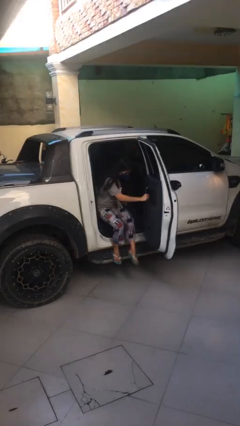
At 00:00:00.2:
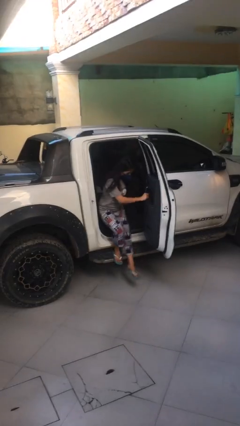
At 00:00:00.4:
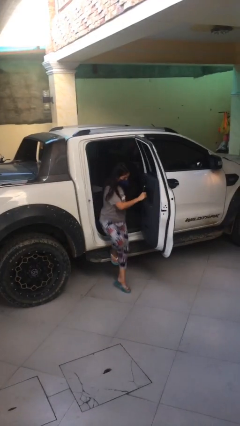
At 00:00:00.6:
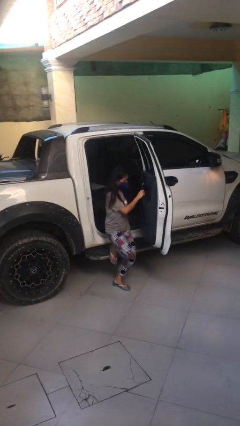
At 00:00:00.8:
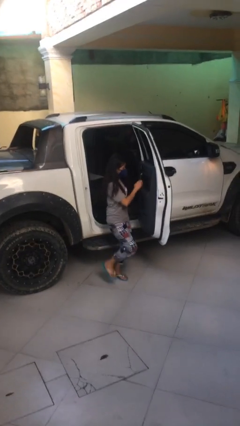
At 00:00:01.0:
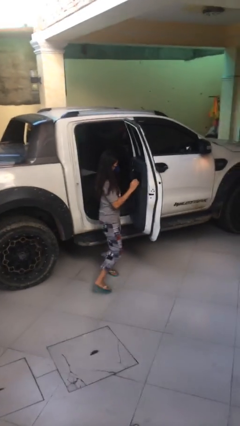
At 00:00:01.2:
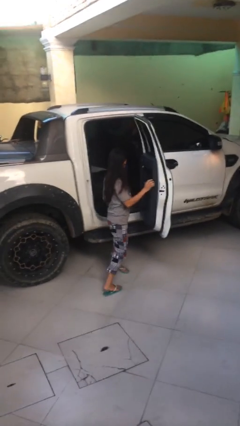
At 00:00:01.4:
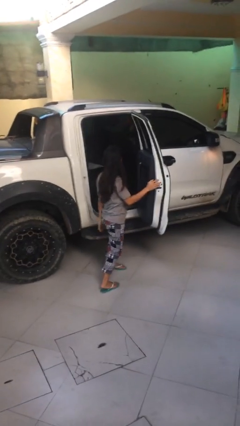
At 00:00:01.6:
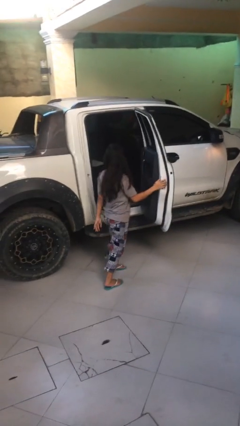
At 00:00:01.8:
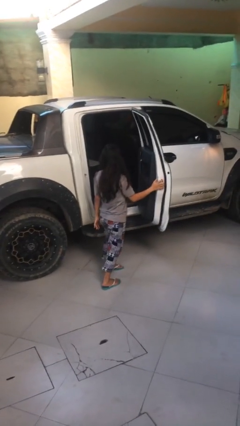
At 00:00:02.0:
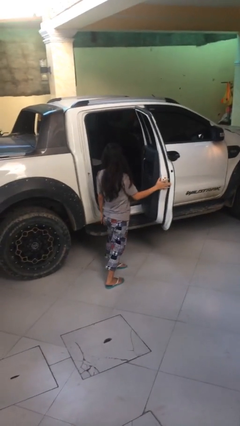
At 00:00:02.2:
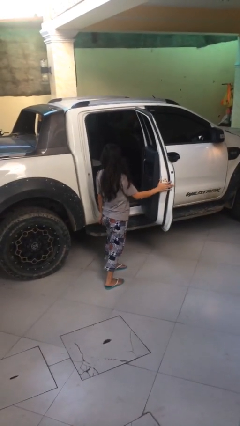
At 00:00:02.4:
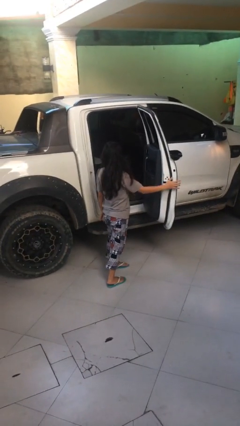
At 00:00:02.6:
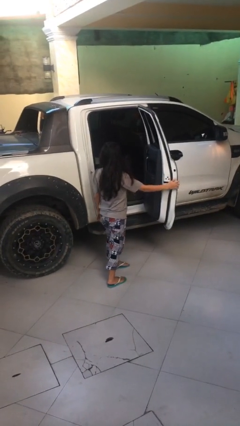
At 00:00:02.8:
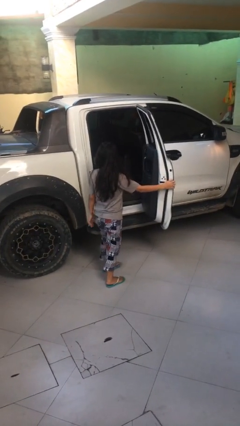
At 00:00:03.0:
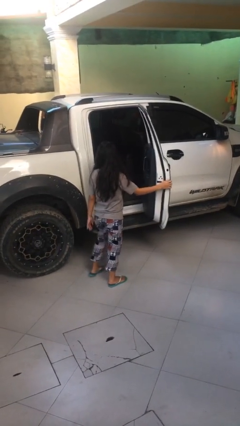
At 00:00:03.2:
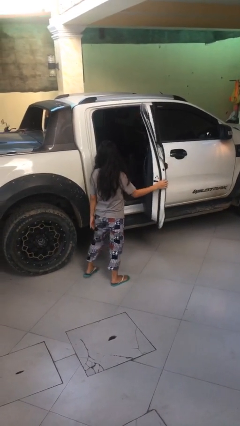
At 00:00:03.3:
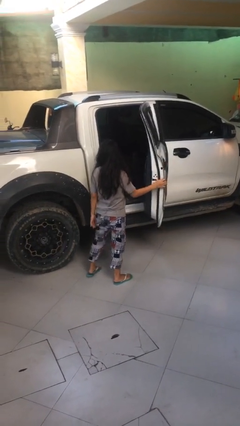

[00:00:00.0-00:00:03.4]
person exits car

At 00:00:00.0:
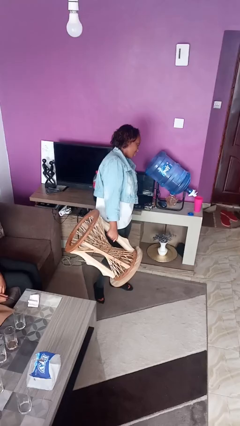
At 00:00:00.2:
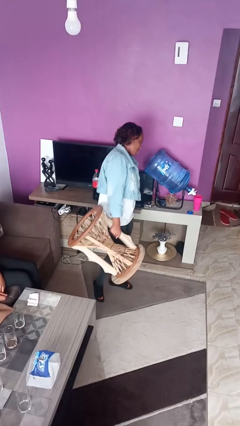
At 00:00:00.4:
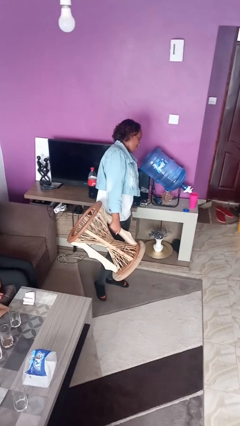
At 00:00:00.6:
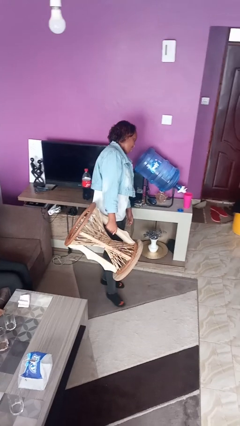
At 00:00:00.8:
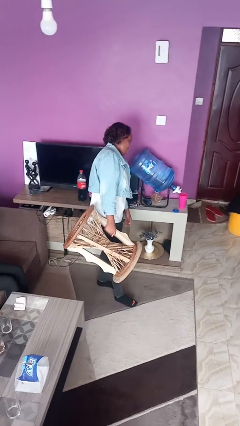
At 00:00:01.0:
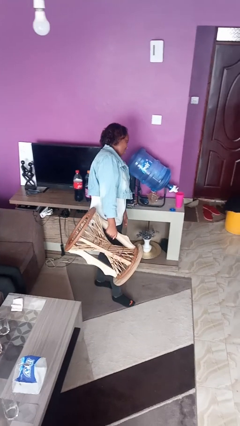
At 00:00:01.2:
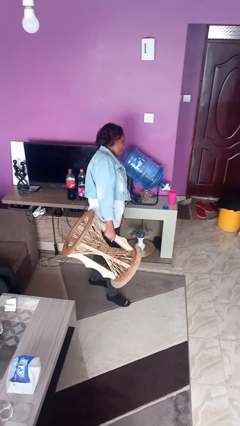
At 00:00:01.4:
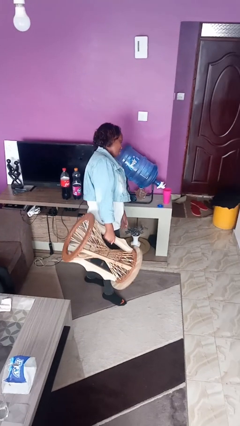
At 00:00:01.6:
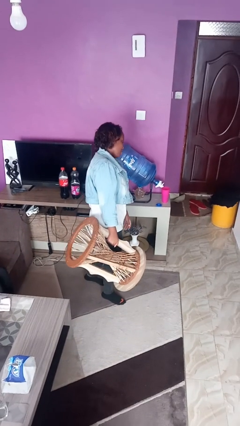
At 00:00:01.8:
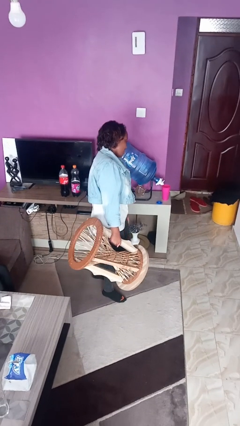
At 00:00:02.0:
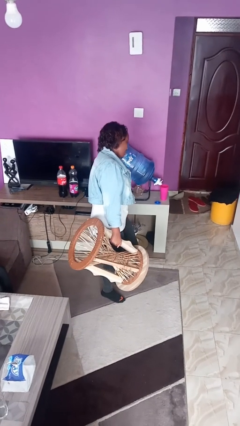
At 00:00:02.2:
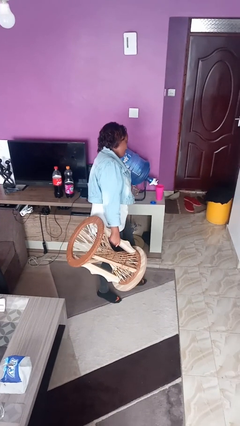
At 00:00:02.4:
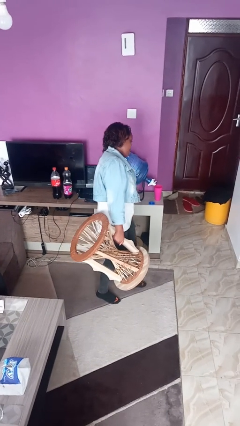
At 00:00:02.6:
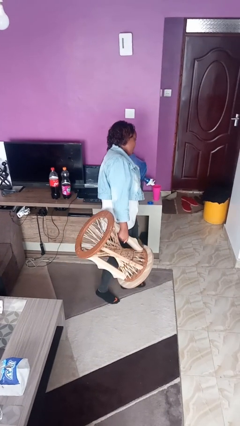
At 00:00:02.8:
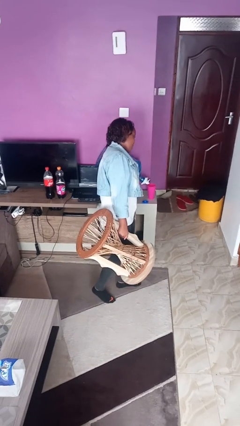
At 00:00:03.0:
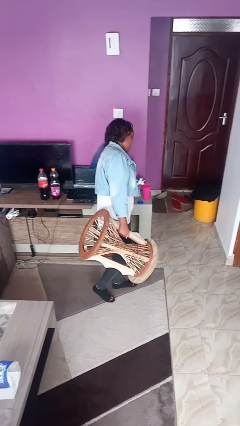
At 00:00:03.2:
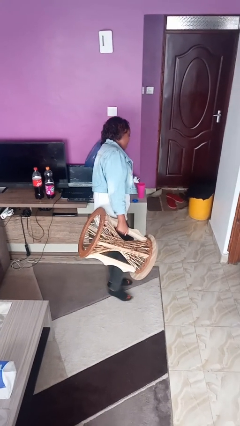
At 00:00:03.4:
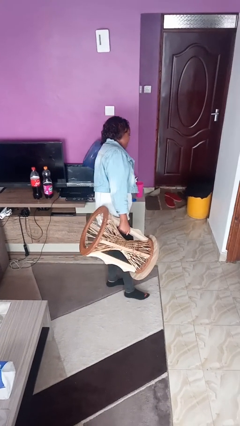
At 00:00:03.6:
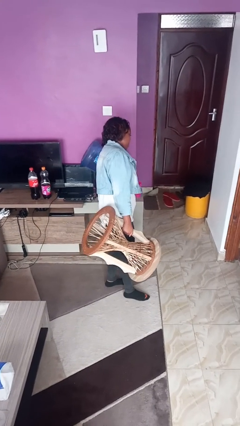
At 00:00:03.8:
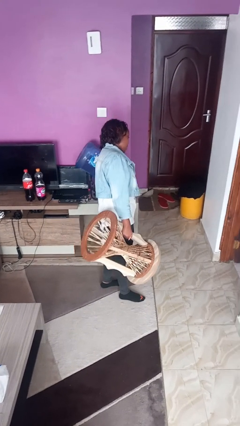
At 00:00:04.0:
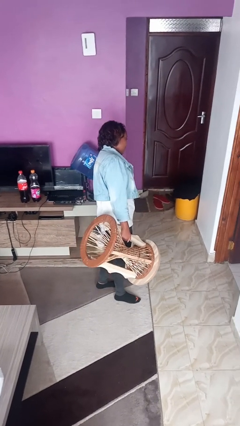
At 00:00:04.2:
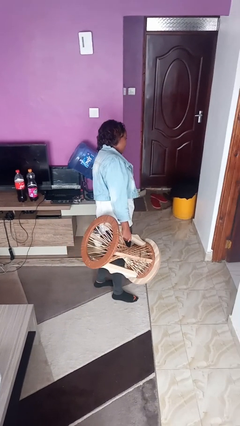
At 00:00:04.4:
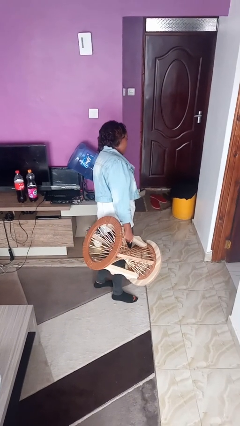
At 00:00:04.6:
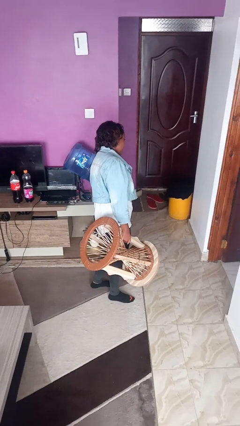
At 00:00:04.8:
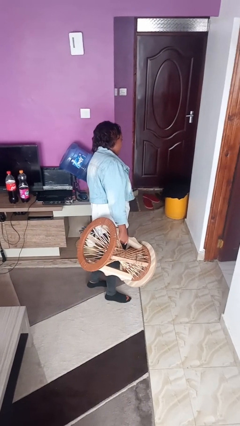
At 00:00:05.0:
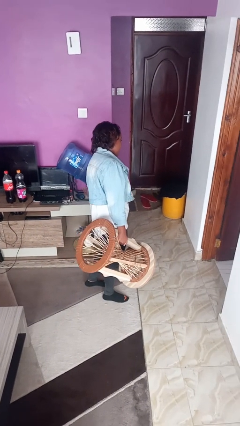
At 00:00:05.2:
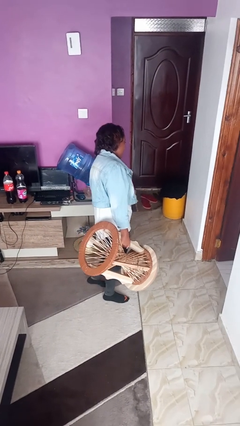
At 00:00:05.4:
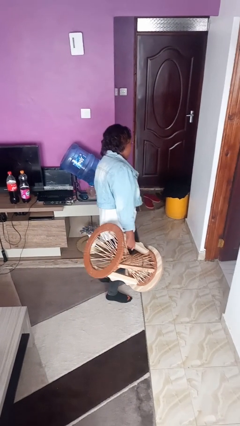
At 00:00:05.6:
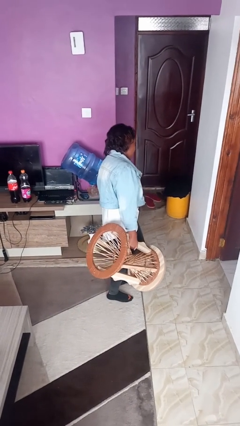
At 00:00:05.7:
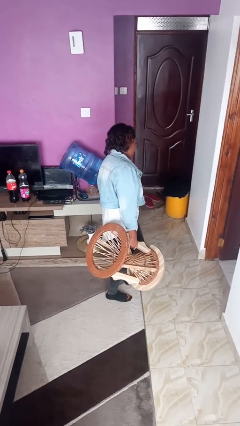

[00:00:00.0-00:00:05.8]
person carries furniture

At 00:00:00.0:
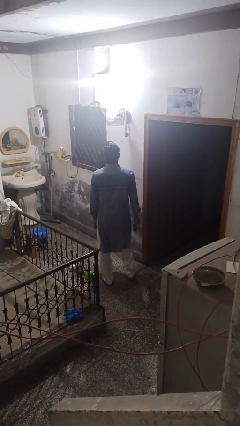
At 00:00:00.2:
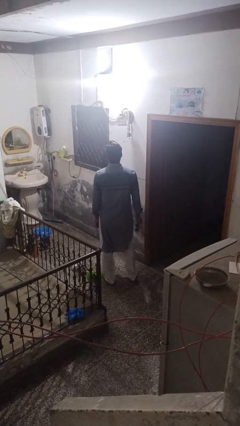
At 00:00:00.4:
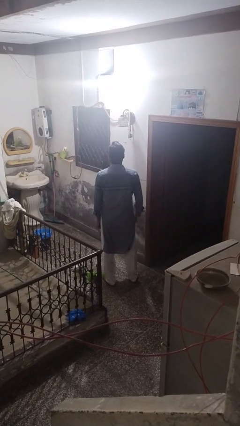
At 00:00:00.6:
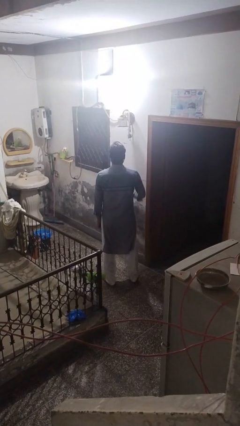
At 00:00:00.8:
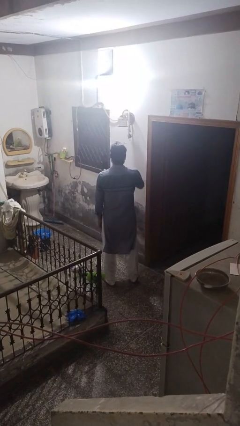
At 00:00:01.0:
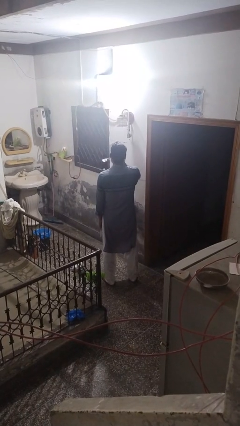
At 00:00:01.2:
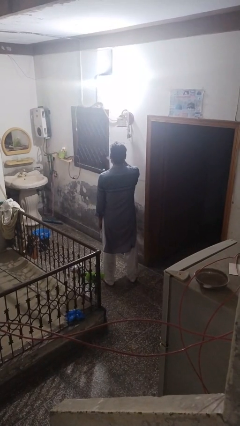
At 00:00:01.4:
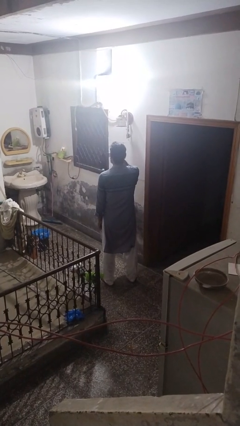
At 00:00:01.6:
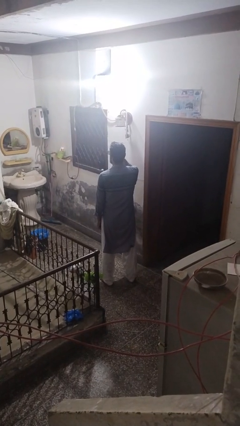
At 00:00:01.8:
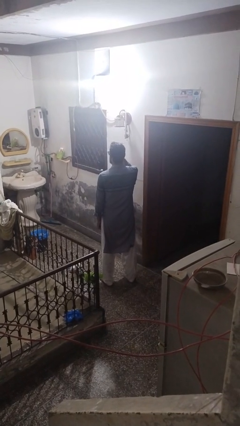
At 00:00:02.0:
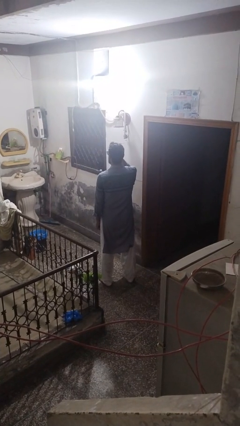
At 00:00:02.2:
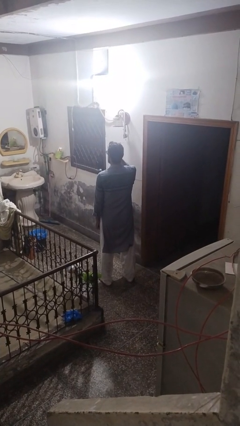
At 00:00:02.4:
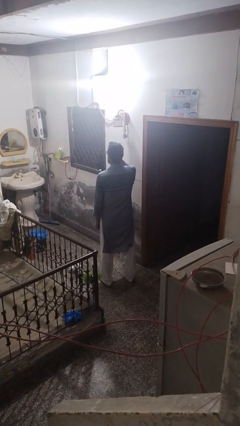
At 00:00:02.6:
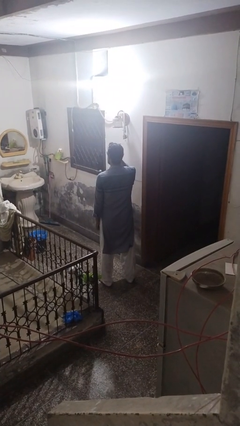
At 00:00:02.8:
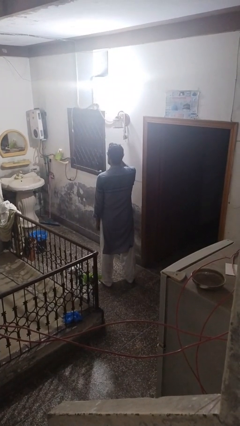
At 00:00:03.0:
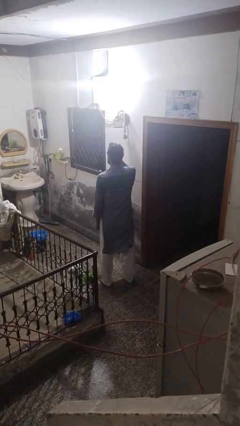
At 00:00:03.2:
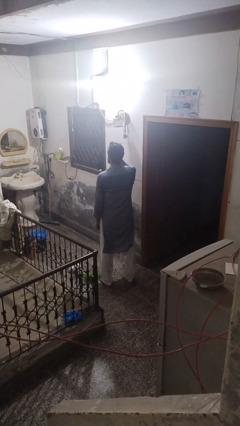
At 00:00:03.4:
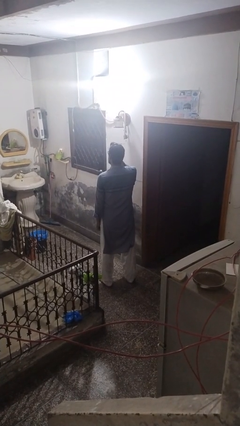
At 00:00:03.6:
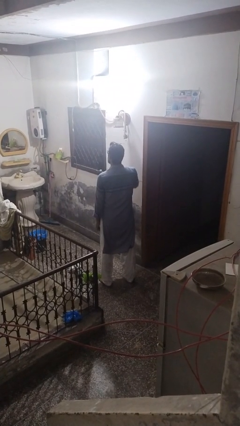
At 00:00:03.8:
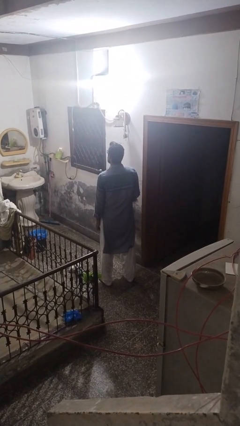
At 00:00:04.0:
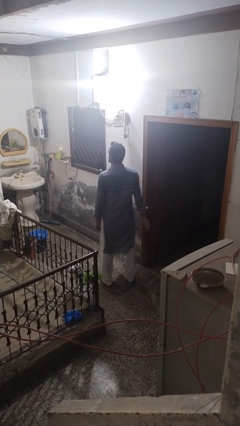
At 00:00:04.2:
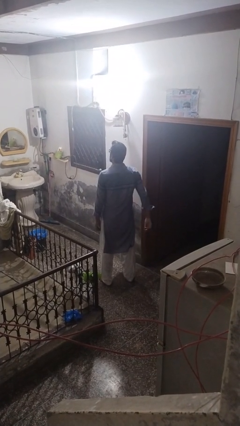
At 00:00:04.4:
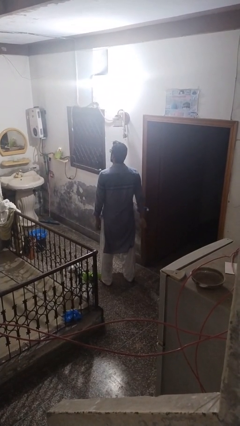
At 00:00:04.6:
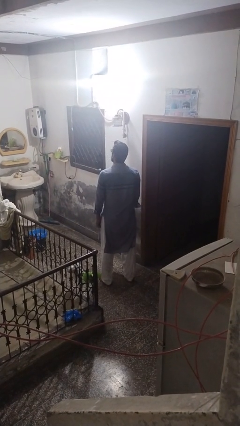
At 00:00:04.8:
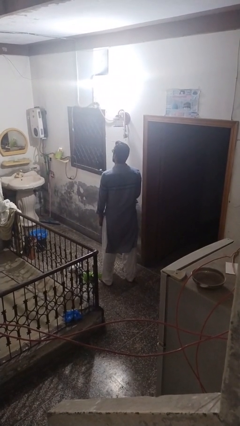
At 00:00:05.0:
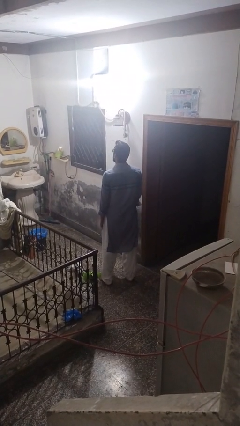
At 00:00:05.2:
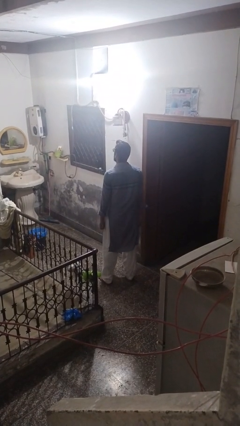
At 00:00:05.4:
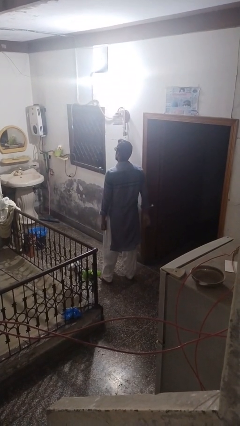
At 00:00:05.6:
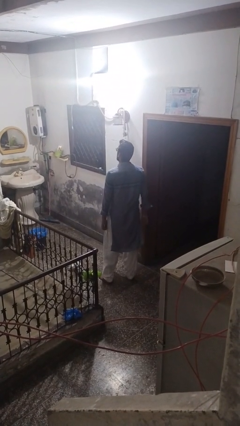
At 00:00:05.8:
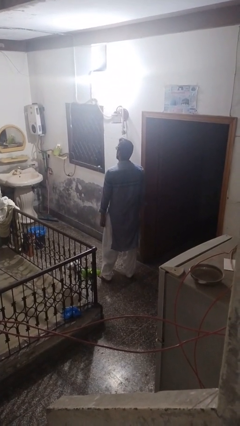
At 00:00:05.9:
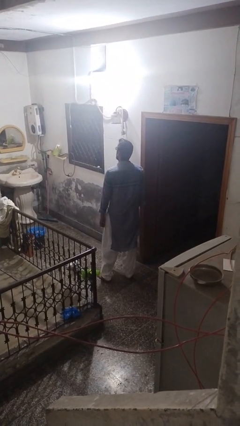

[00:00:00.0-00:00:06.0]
person puts on sunglasses

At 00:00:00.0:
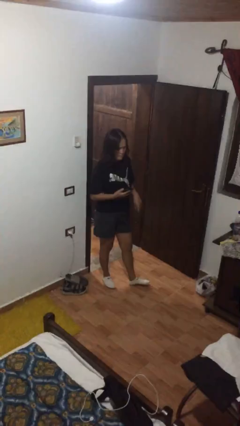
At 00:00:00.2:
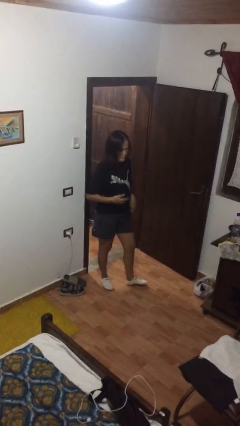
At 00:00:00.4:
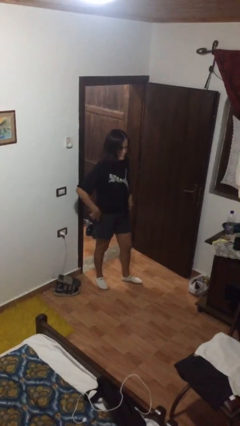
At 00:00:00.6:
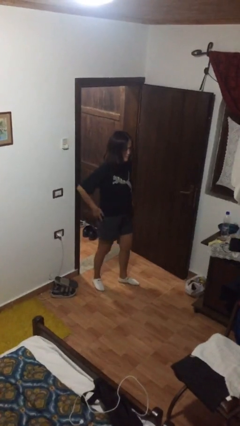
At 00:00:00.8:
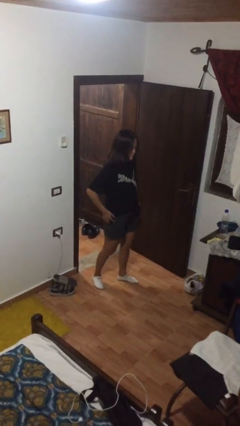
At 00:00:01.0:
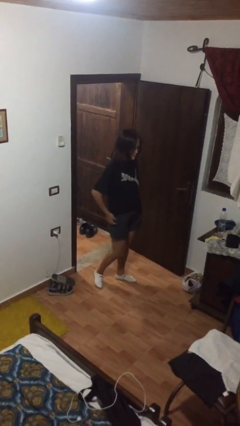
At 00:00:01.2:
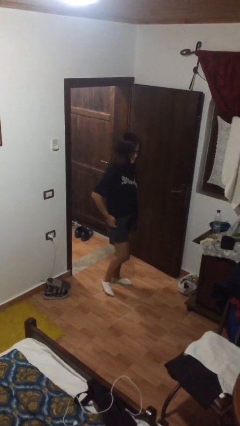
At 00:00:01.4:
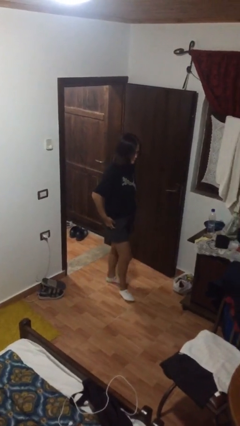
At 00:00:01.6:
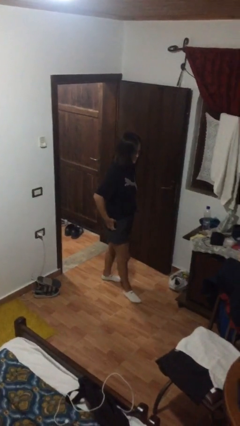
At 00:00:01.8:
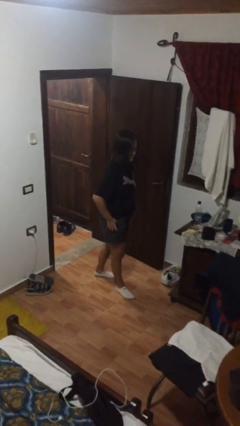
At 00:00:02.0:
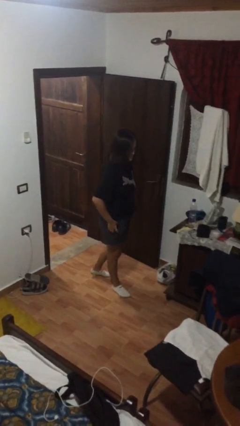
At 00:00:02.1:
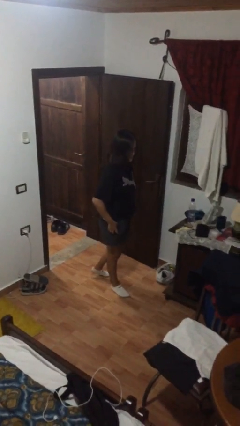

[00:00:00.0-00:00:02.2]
person puts phone into pocket
